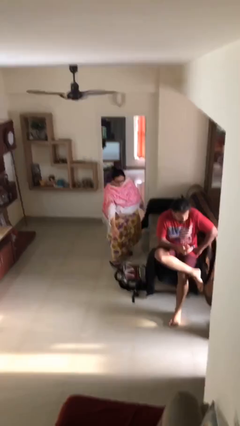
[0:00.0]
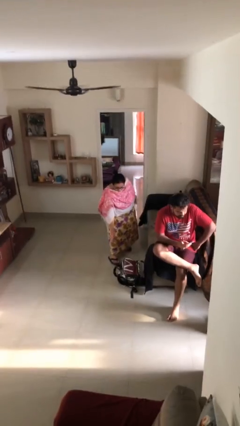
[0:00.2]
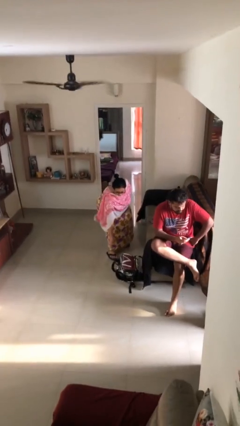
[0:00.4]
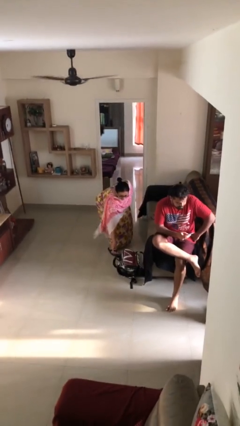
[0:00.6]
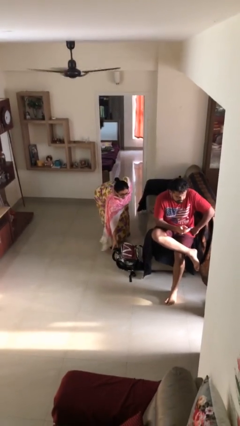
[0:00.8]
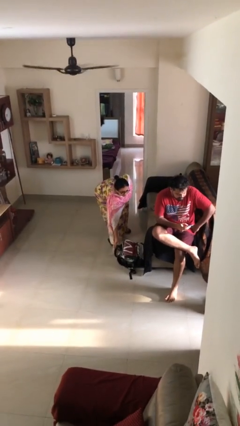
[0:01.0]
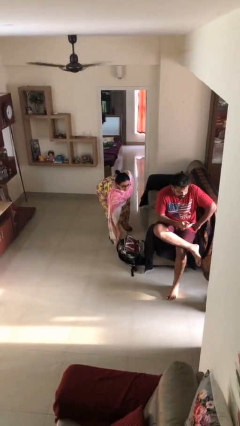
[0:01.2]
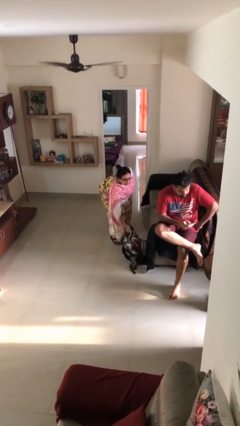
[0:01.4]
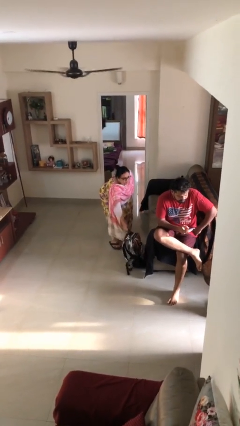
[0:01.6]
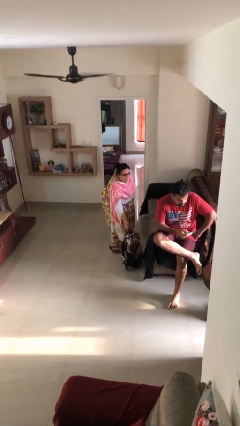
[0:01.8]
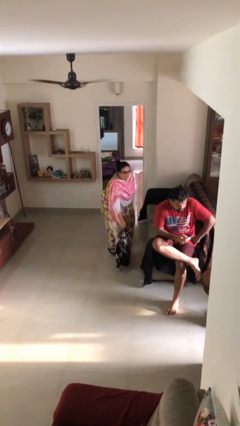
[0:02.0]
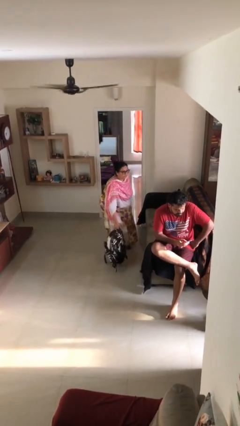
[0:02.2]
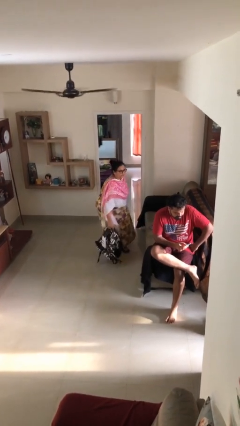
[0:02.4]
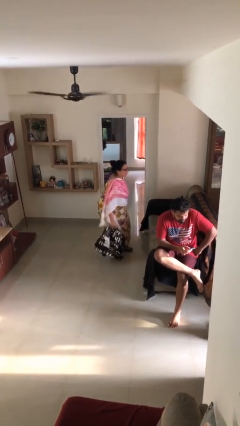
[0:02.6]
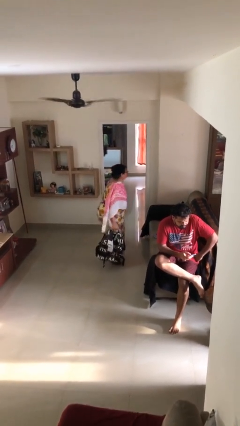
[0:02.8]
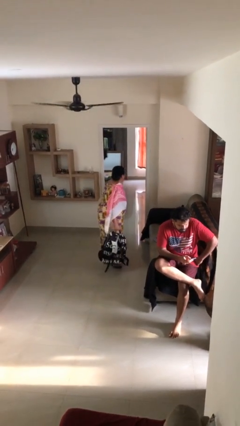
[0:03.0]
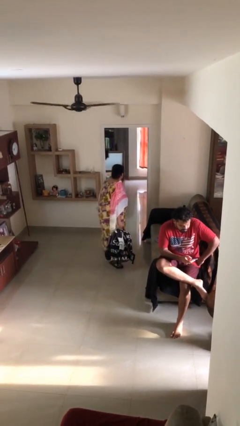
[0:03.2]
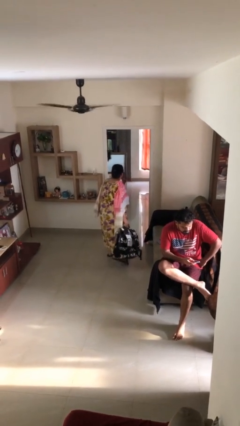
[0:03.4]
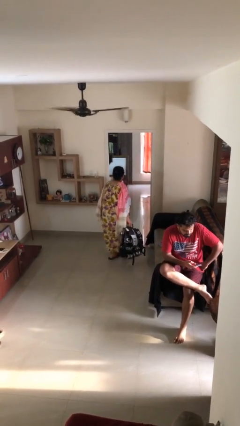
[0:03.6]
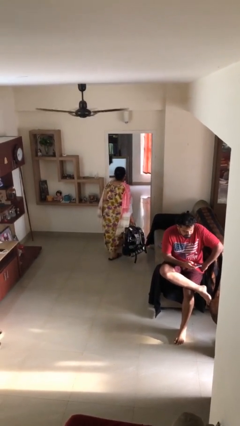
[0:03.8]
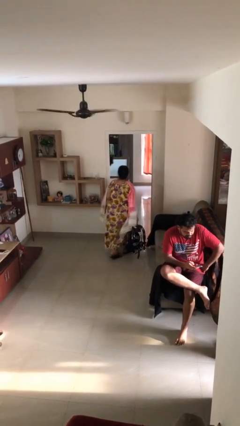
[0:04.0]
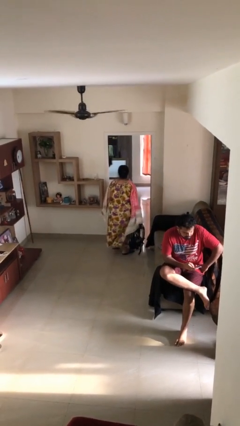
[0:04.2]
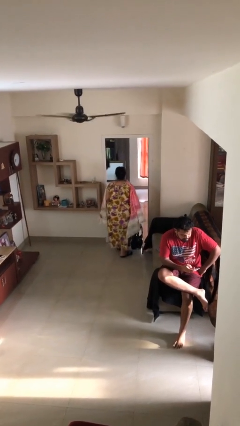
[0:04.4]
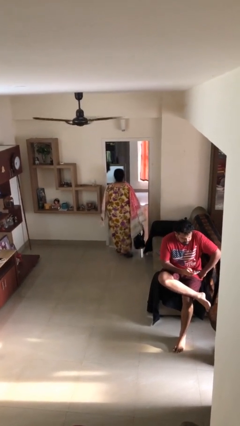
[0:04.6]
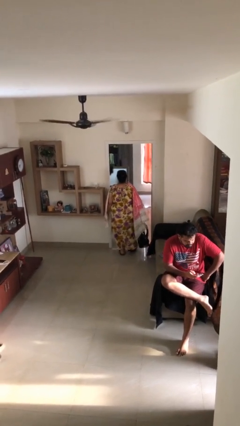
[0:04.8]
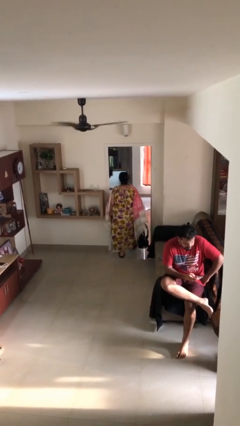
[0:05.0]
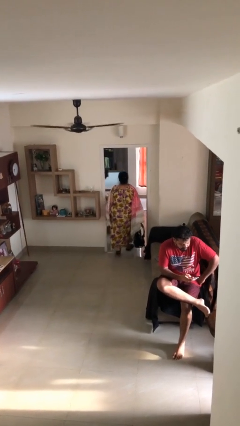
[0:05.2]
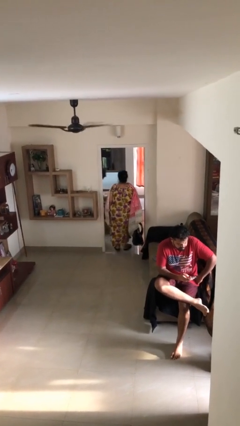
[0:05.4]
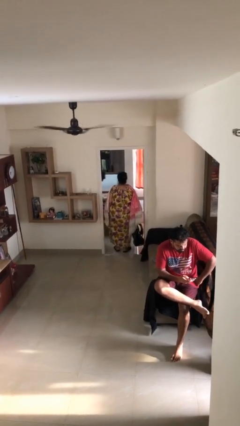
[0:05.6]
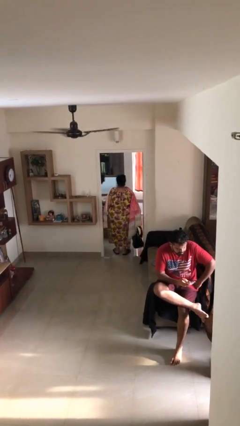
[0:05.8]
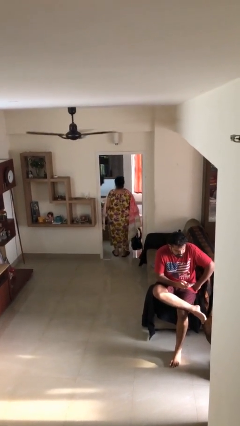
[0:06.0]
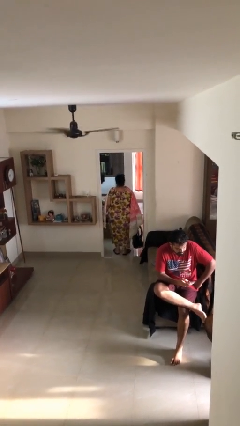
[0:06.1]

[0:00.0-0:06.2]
person steals object from person

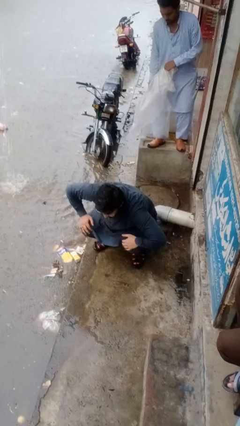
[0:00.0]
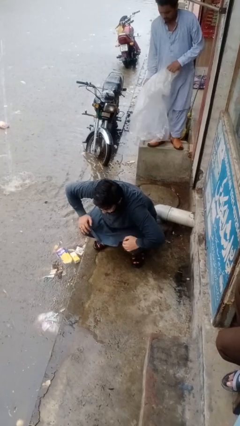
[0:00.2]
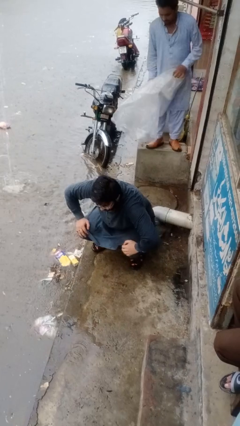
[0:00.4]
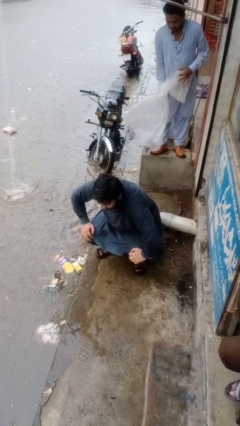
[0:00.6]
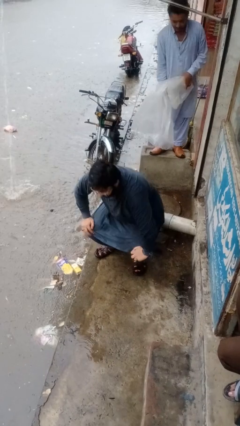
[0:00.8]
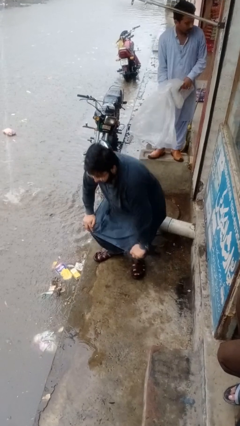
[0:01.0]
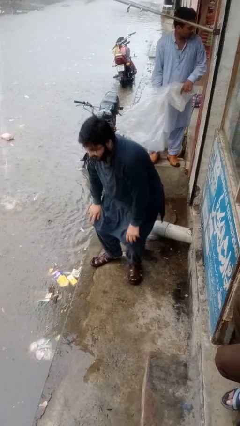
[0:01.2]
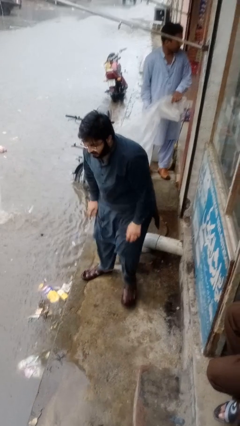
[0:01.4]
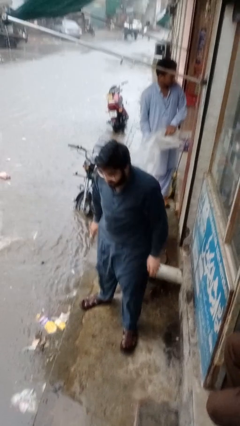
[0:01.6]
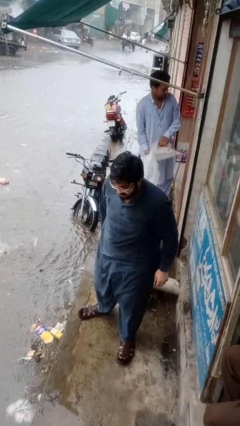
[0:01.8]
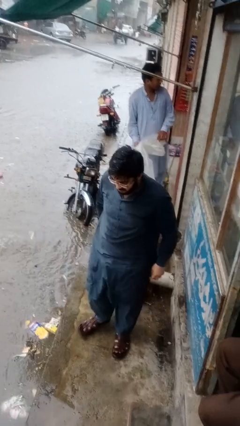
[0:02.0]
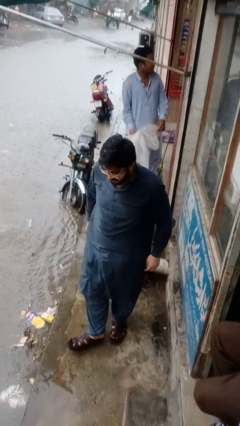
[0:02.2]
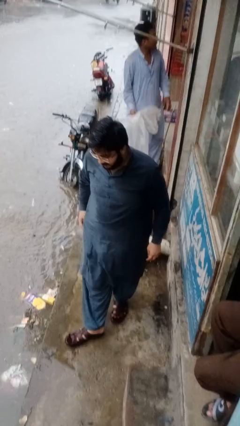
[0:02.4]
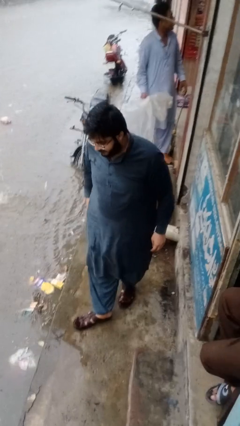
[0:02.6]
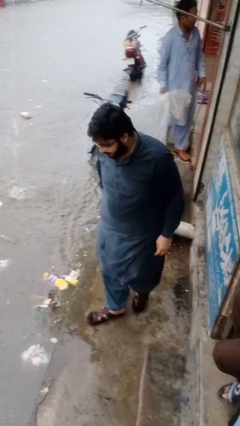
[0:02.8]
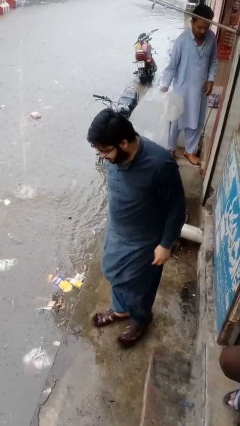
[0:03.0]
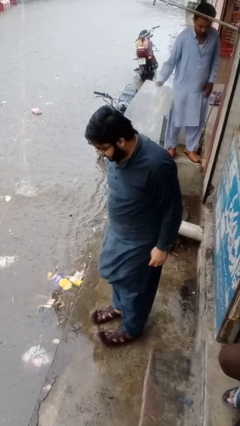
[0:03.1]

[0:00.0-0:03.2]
person stands up from floor

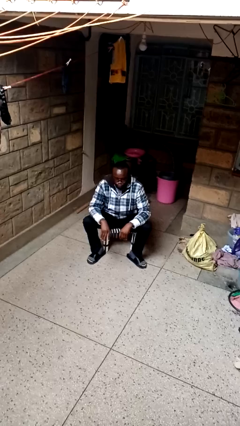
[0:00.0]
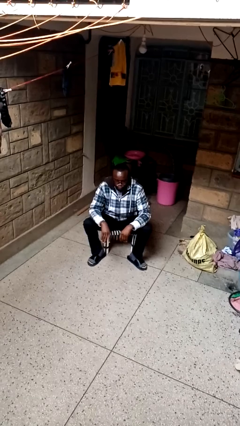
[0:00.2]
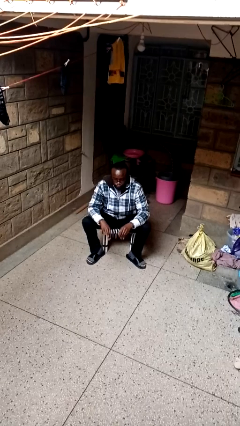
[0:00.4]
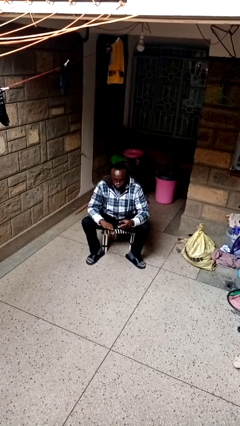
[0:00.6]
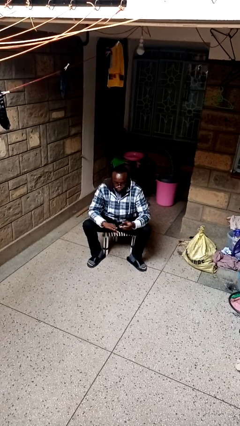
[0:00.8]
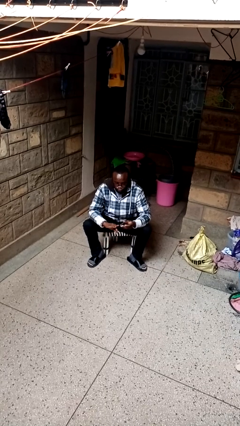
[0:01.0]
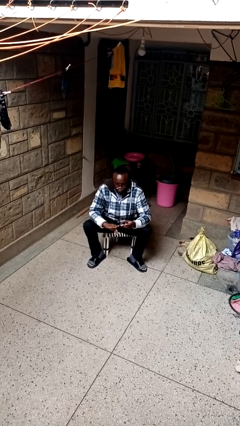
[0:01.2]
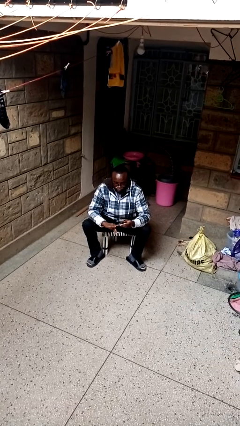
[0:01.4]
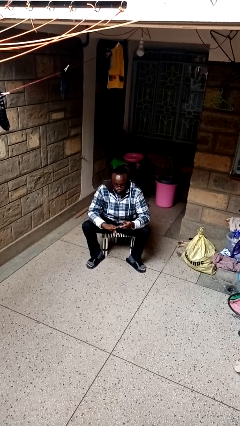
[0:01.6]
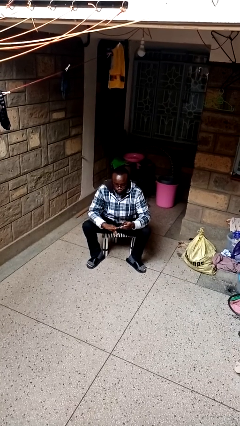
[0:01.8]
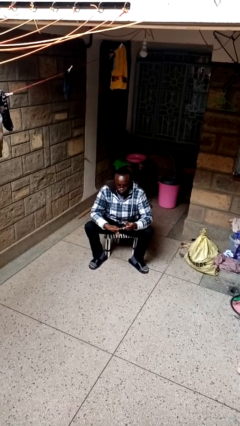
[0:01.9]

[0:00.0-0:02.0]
person clips fingernails

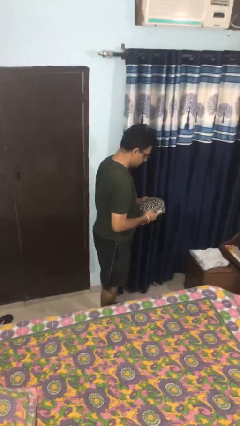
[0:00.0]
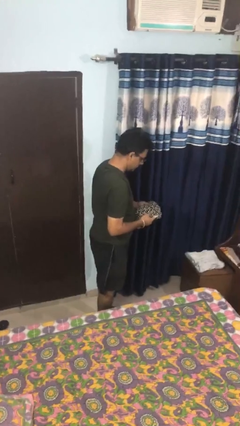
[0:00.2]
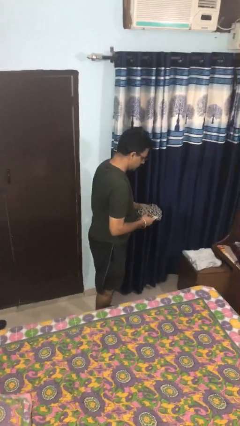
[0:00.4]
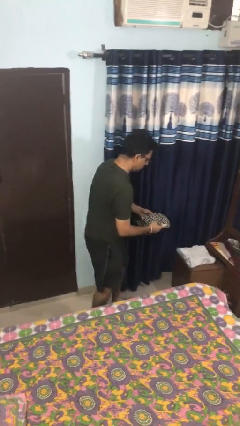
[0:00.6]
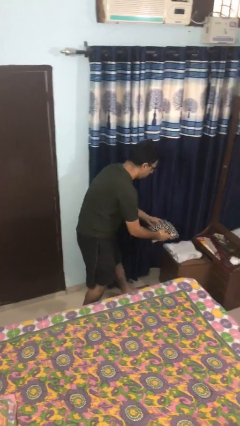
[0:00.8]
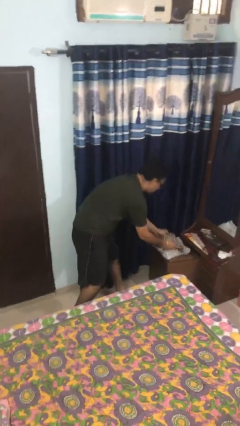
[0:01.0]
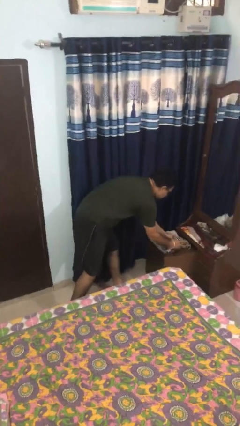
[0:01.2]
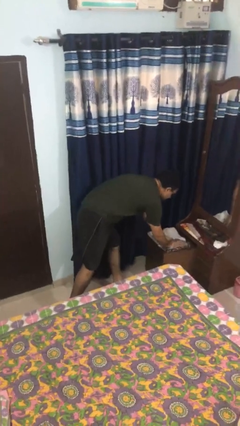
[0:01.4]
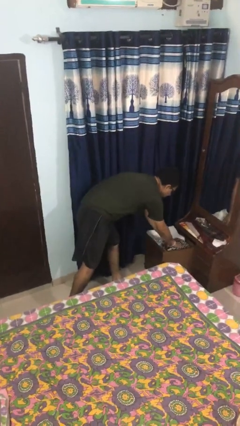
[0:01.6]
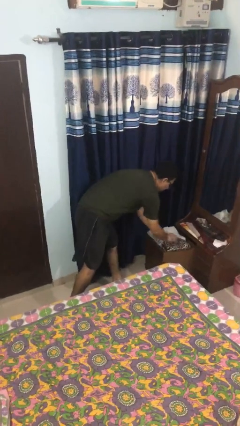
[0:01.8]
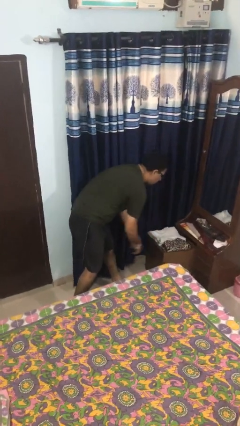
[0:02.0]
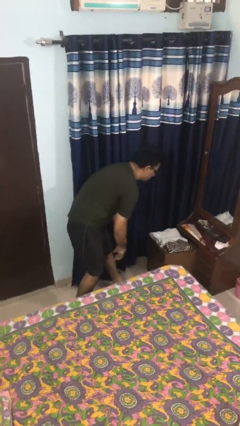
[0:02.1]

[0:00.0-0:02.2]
person puts clothes into dresser

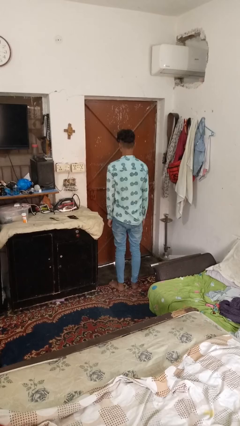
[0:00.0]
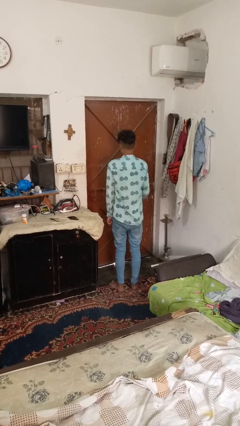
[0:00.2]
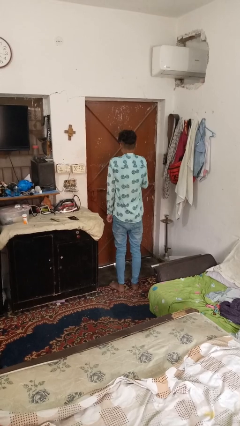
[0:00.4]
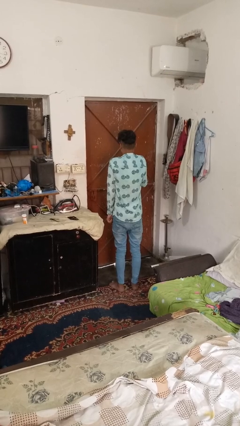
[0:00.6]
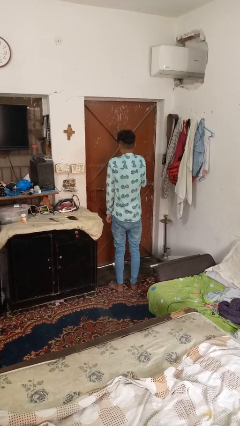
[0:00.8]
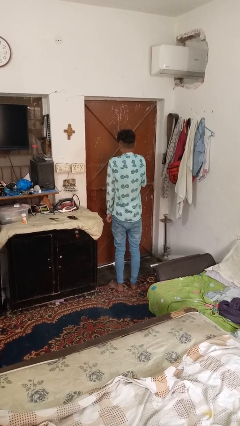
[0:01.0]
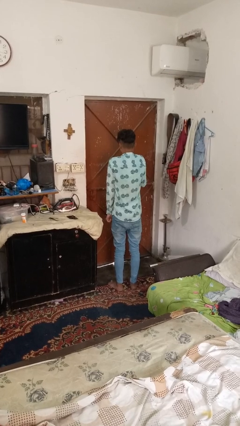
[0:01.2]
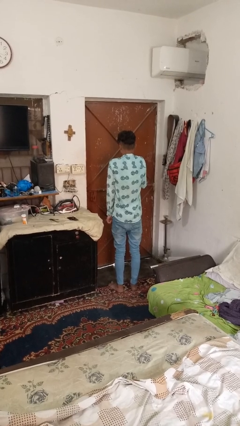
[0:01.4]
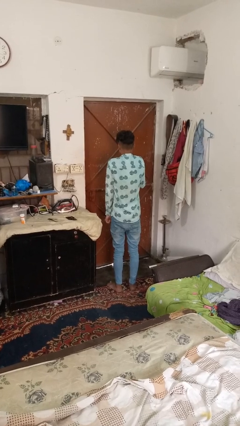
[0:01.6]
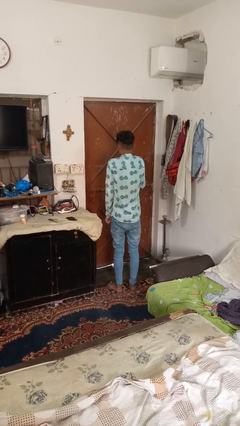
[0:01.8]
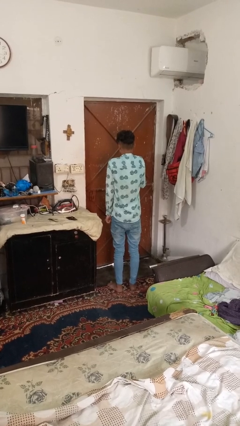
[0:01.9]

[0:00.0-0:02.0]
person shrugs

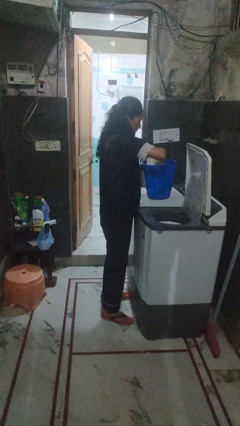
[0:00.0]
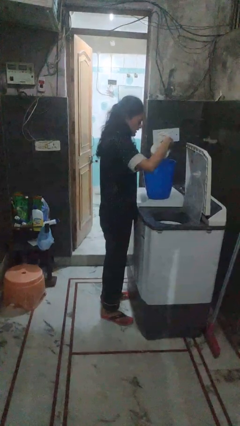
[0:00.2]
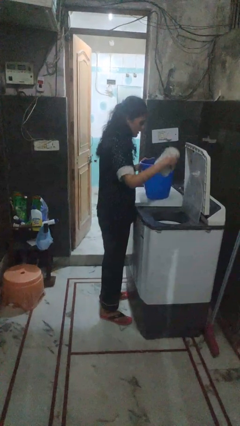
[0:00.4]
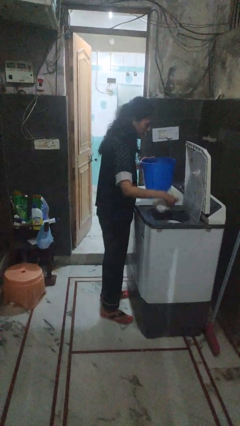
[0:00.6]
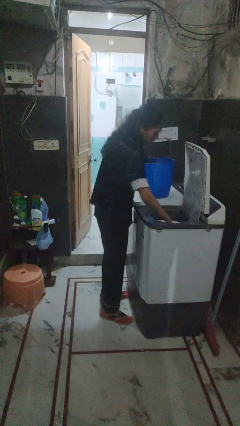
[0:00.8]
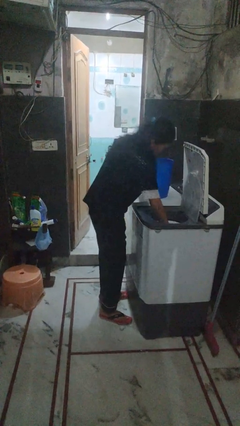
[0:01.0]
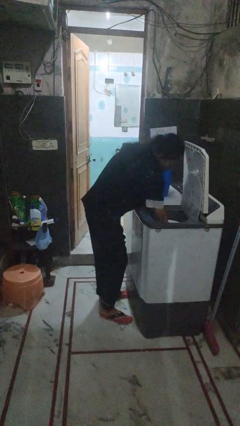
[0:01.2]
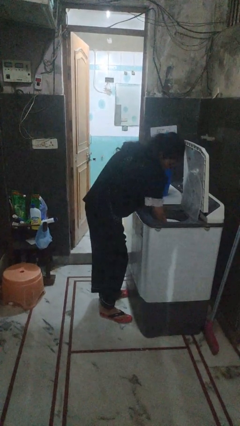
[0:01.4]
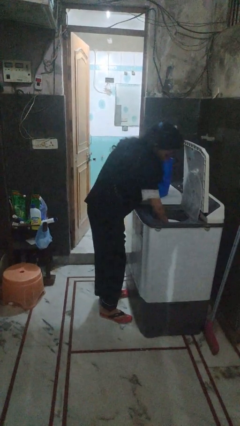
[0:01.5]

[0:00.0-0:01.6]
person loads dryer
